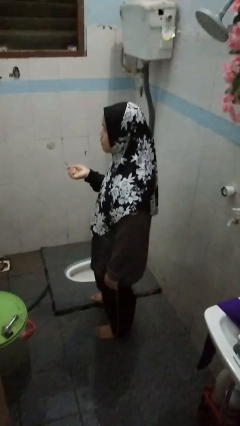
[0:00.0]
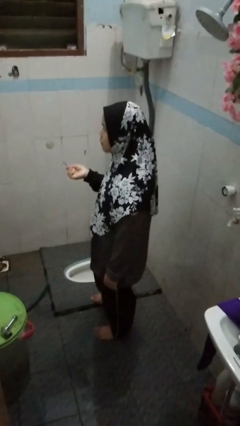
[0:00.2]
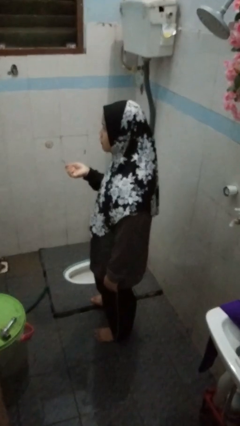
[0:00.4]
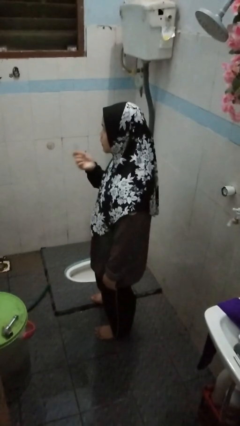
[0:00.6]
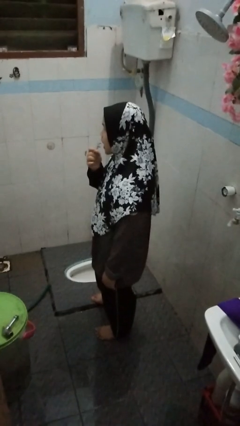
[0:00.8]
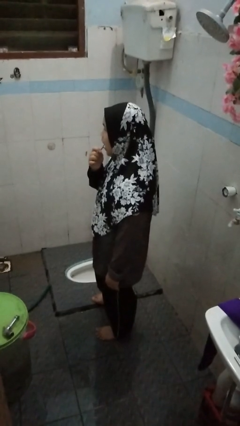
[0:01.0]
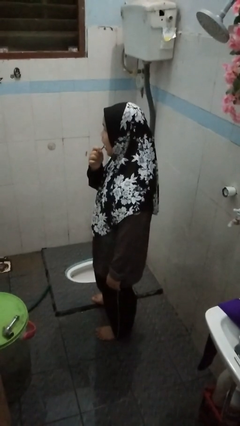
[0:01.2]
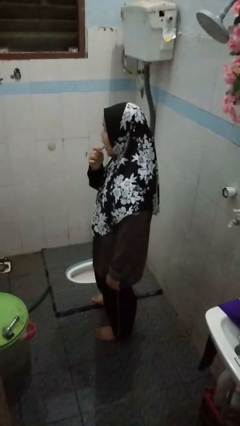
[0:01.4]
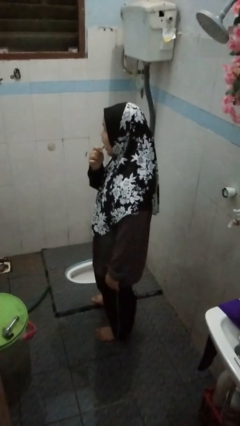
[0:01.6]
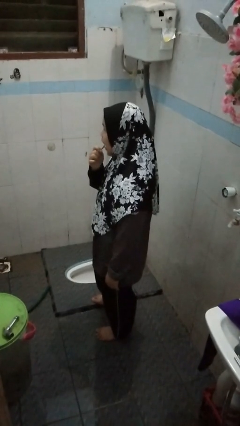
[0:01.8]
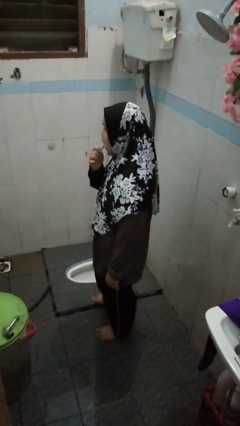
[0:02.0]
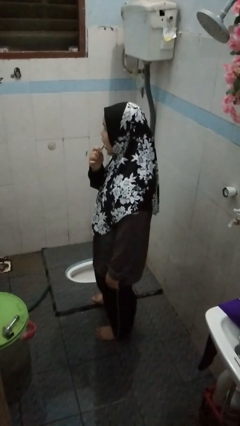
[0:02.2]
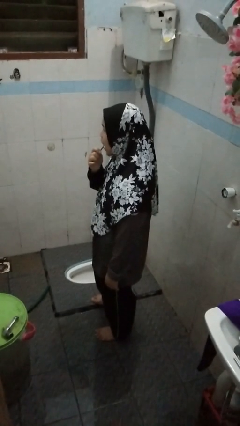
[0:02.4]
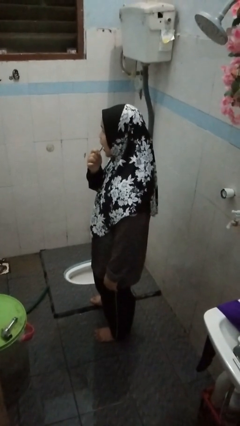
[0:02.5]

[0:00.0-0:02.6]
person flosses

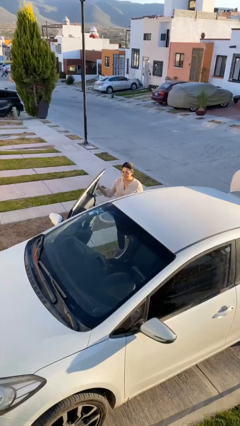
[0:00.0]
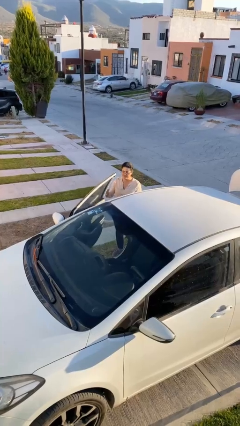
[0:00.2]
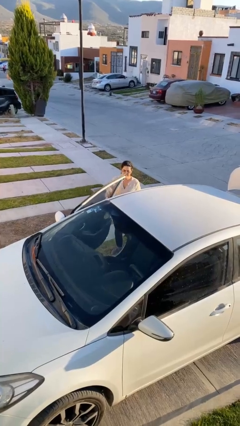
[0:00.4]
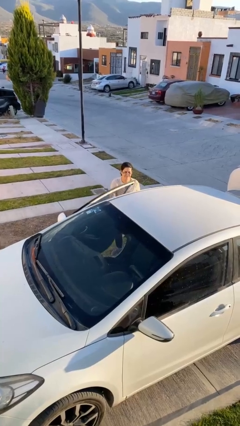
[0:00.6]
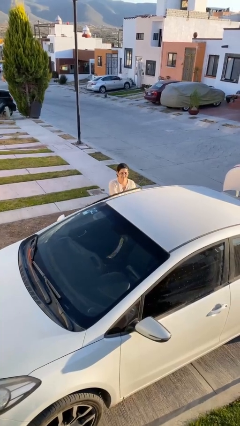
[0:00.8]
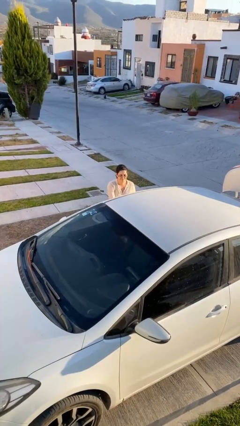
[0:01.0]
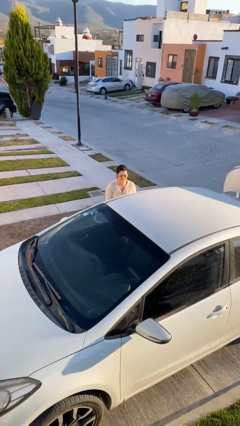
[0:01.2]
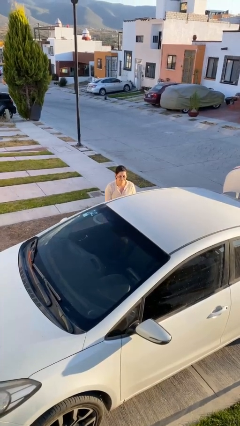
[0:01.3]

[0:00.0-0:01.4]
person closes car door

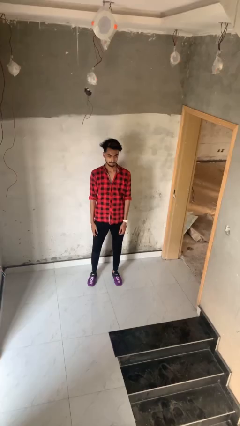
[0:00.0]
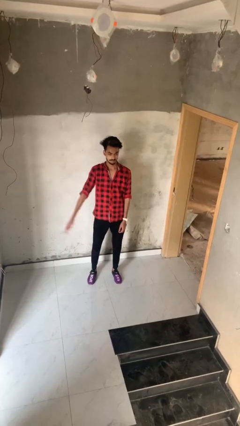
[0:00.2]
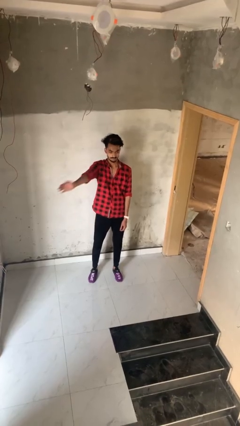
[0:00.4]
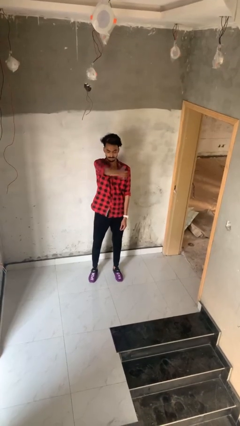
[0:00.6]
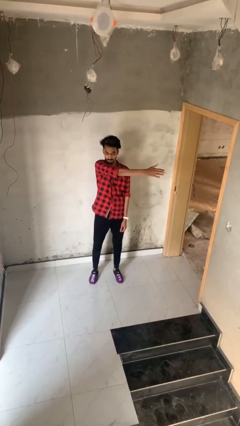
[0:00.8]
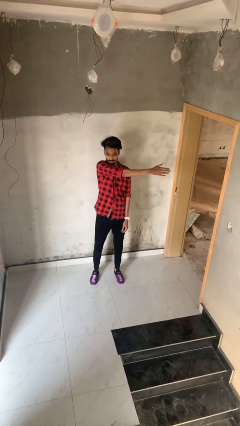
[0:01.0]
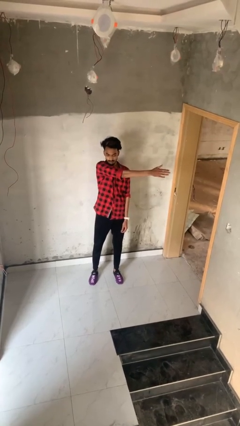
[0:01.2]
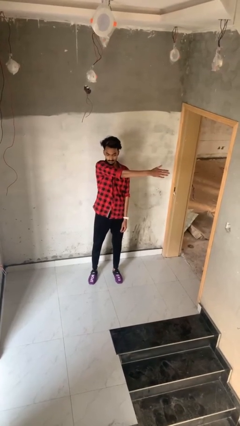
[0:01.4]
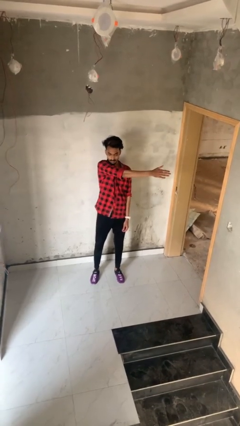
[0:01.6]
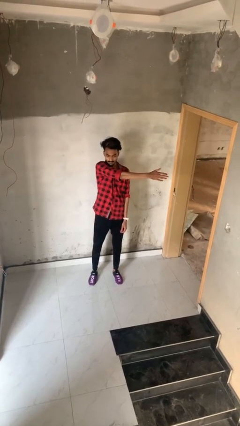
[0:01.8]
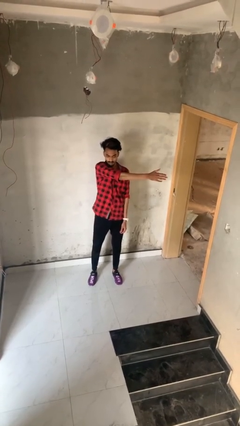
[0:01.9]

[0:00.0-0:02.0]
person gestures swipe left

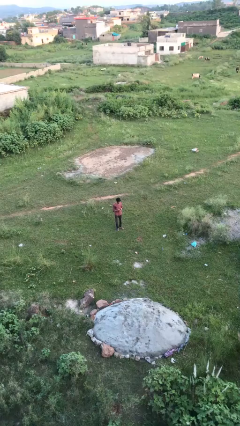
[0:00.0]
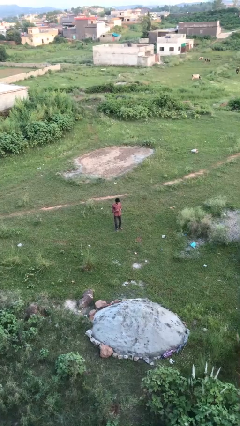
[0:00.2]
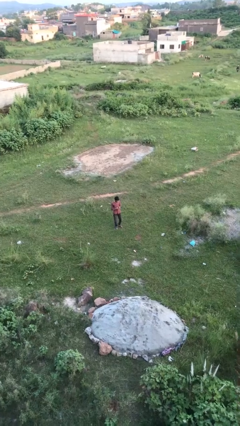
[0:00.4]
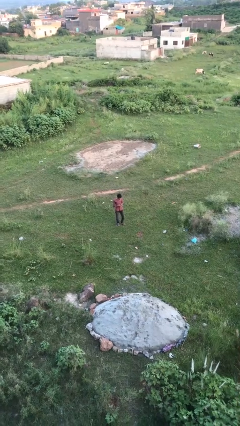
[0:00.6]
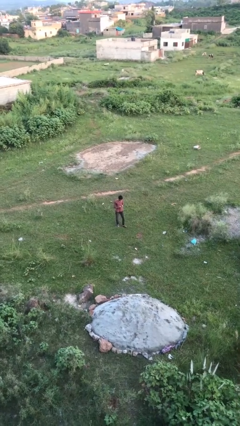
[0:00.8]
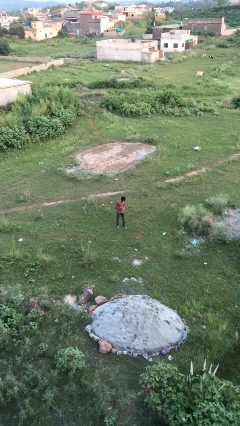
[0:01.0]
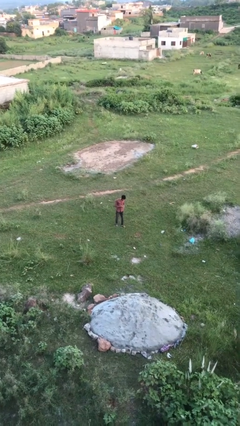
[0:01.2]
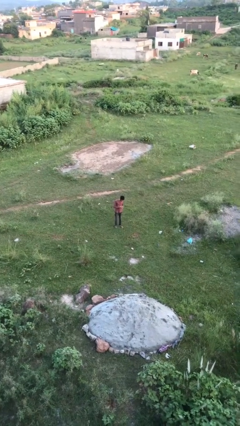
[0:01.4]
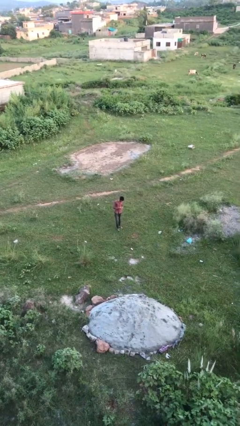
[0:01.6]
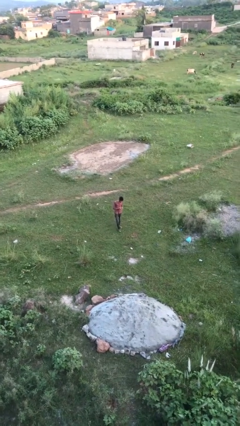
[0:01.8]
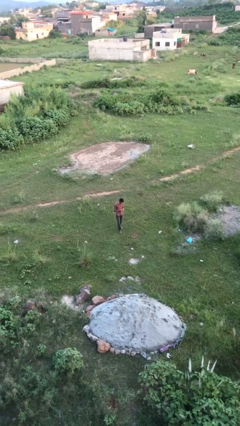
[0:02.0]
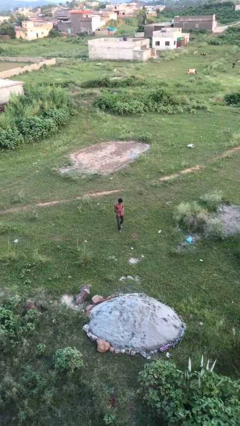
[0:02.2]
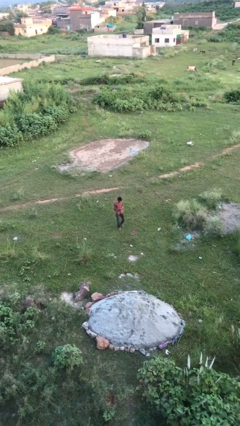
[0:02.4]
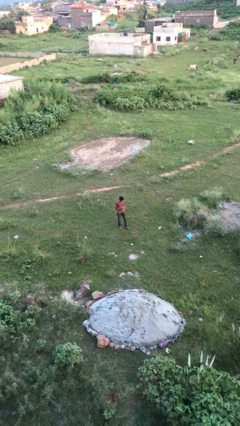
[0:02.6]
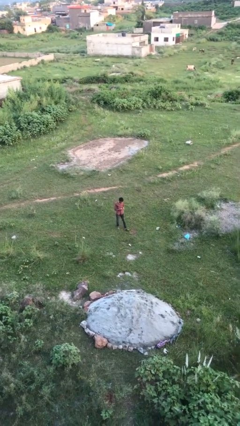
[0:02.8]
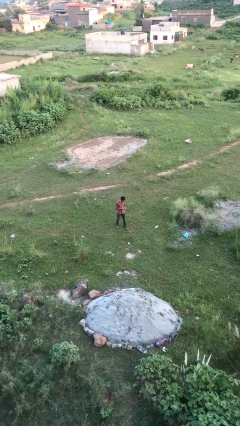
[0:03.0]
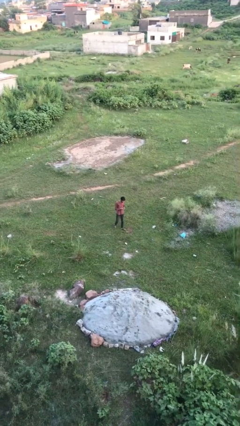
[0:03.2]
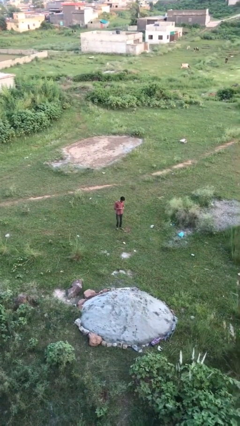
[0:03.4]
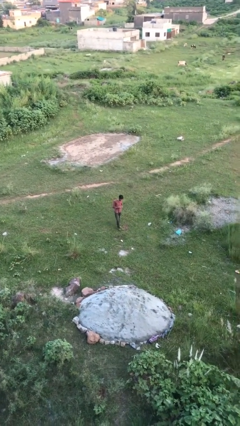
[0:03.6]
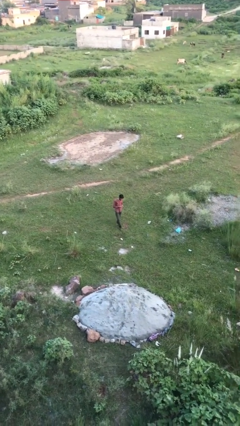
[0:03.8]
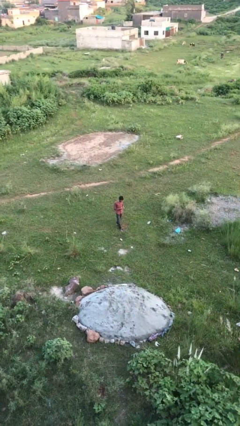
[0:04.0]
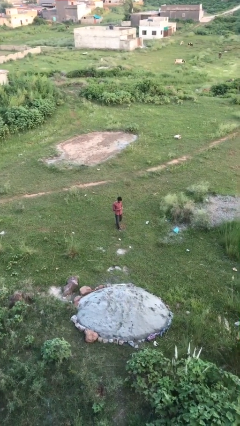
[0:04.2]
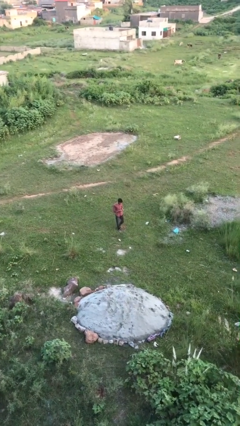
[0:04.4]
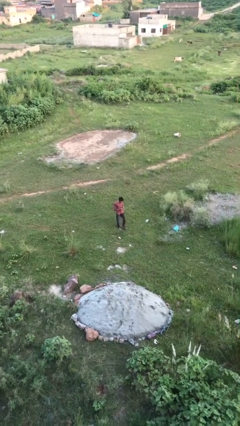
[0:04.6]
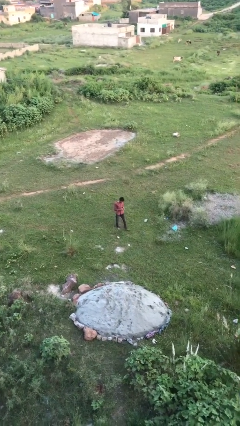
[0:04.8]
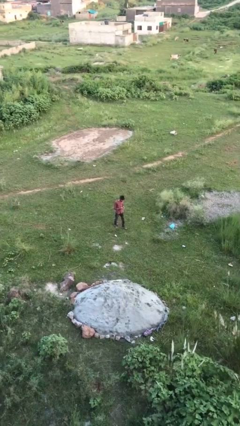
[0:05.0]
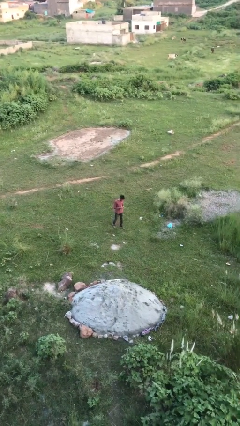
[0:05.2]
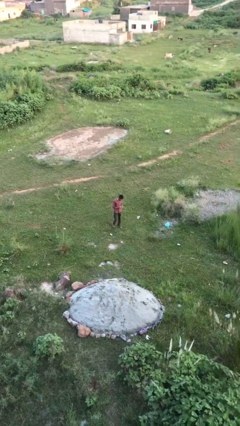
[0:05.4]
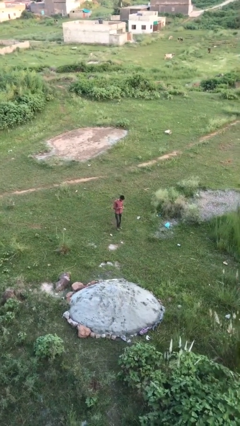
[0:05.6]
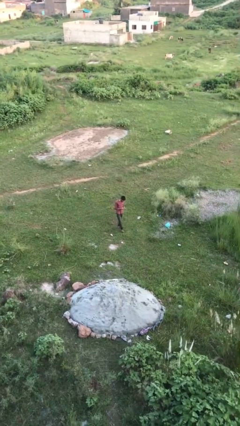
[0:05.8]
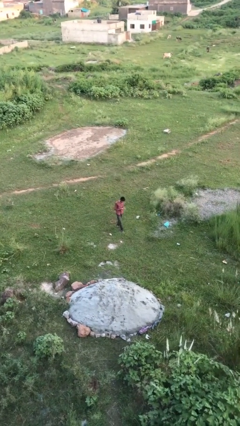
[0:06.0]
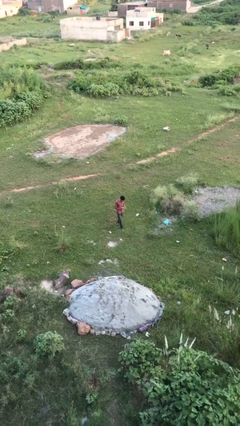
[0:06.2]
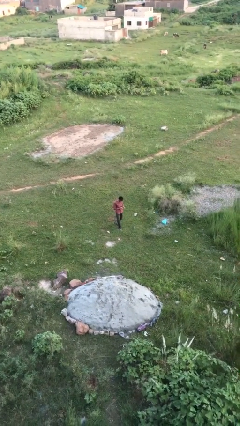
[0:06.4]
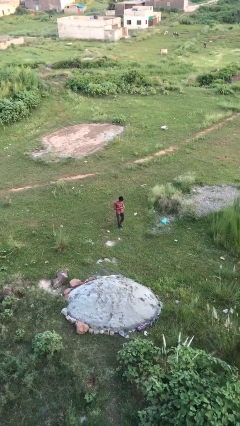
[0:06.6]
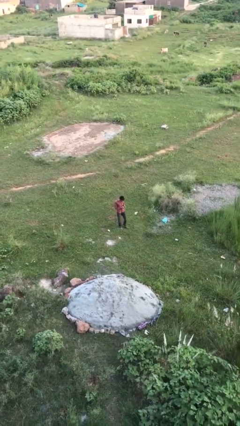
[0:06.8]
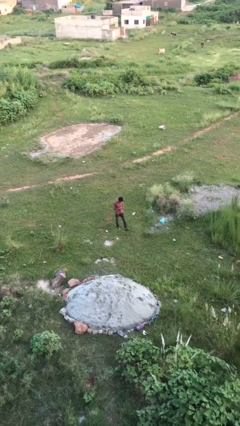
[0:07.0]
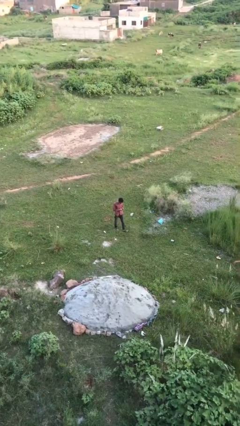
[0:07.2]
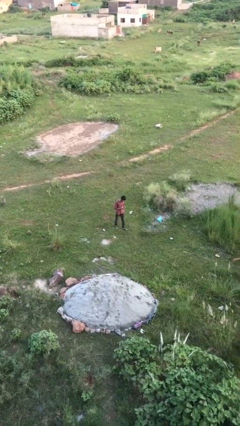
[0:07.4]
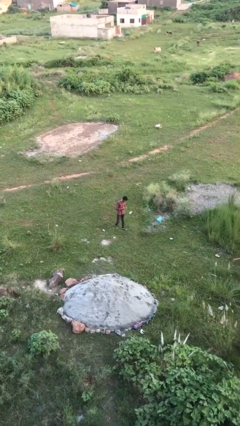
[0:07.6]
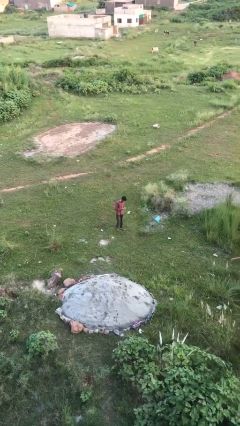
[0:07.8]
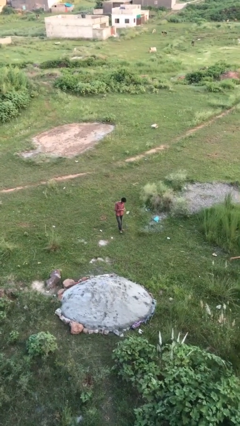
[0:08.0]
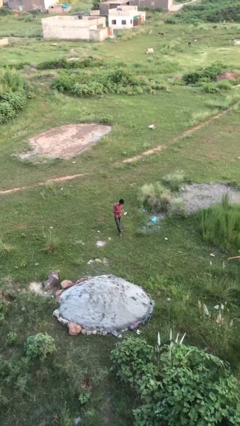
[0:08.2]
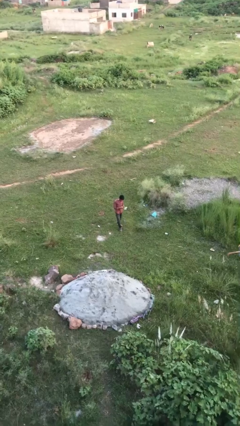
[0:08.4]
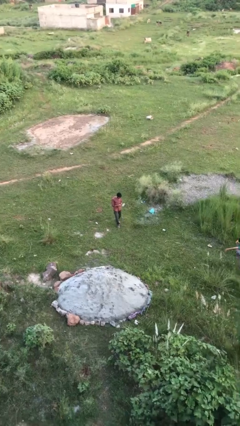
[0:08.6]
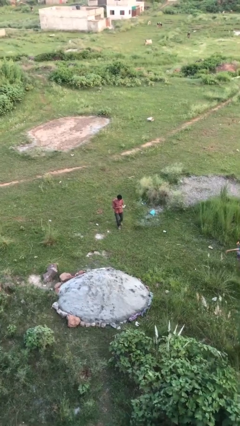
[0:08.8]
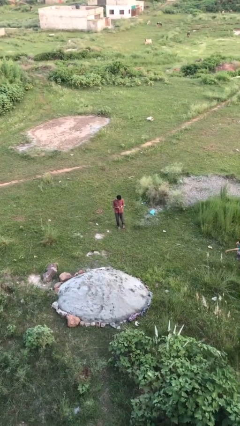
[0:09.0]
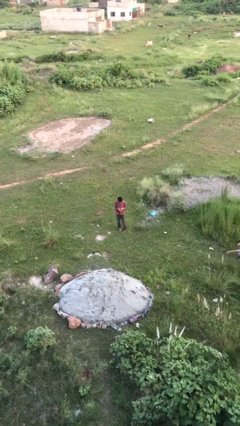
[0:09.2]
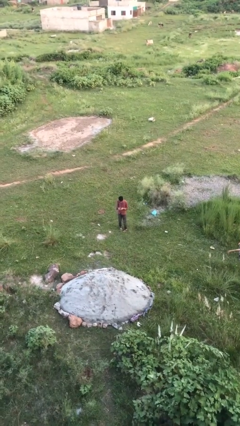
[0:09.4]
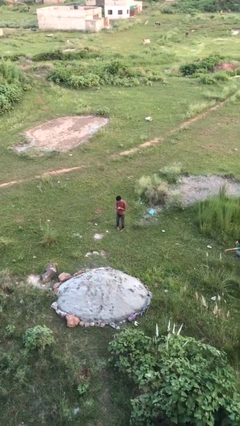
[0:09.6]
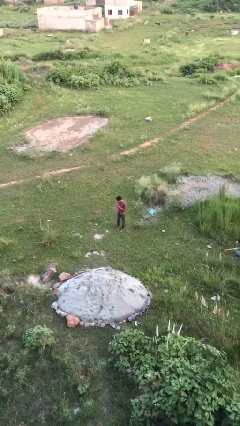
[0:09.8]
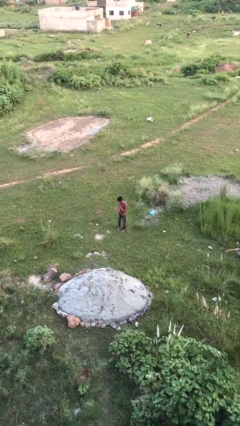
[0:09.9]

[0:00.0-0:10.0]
person texts on phone

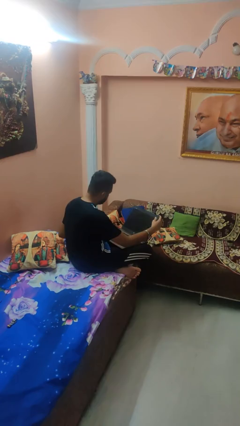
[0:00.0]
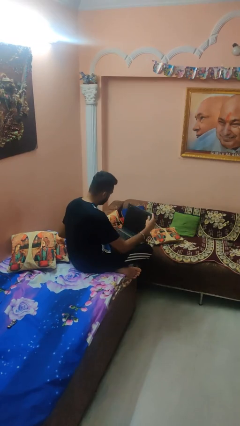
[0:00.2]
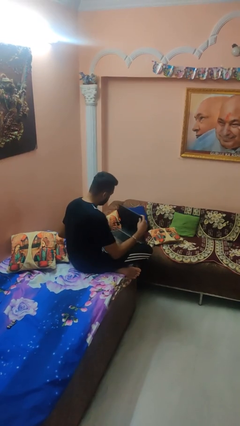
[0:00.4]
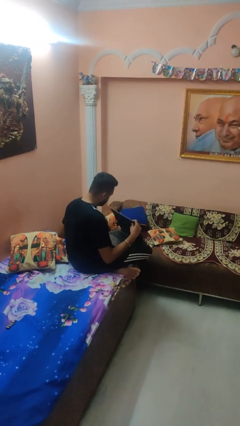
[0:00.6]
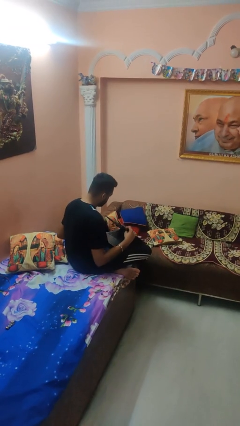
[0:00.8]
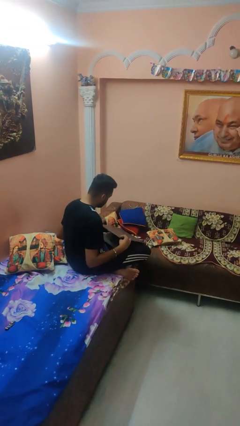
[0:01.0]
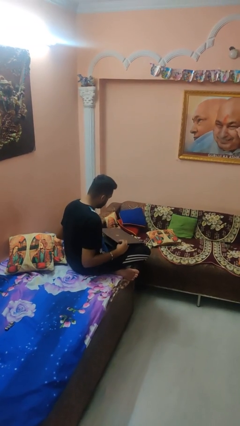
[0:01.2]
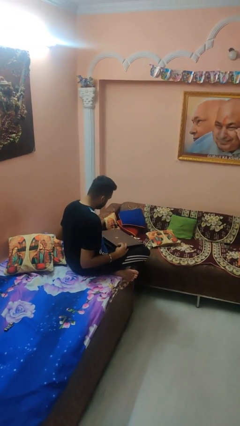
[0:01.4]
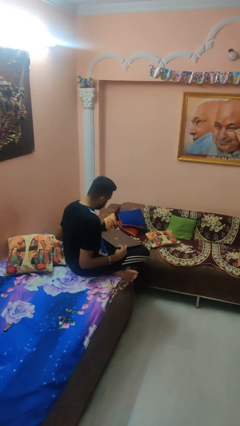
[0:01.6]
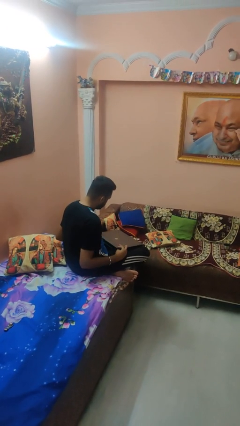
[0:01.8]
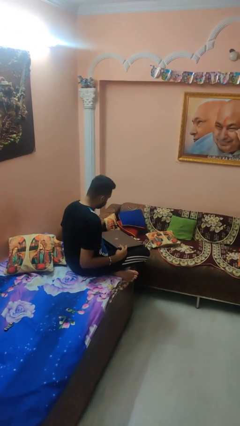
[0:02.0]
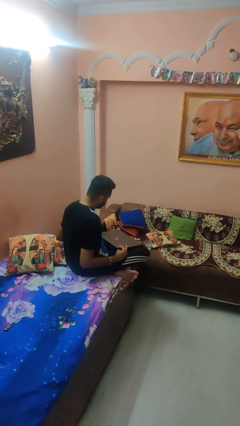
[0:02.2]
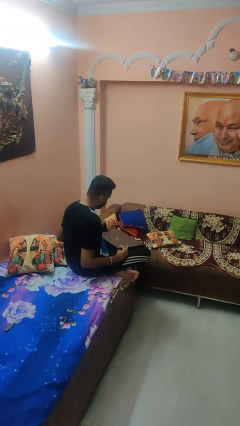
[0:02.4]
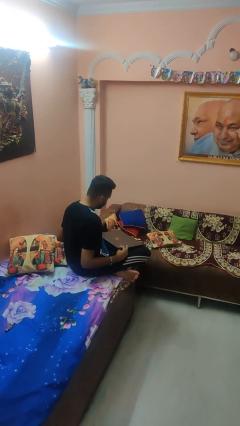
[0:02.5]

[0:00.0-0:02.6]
person closes laptop
